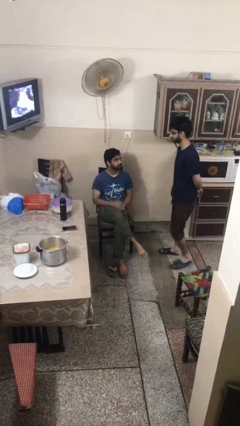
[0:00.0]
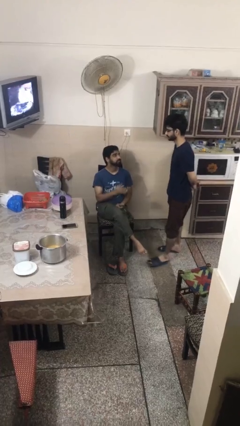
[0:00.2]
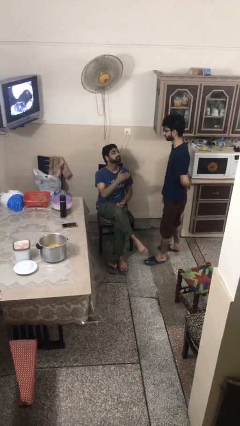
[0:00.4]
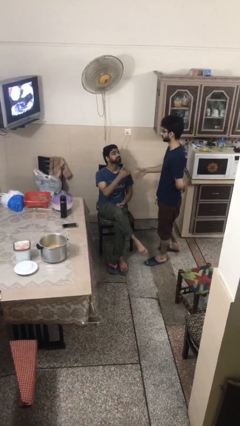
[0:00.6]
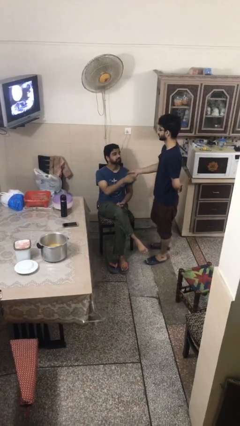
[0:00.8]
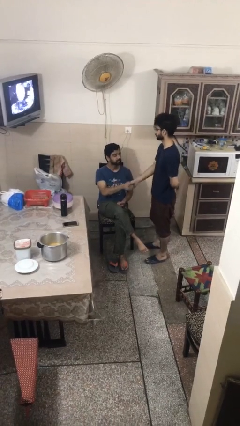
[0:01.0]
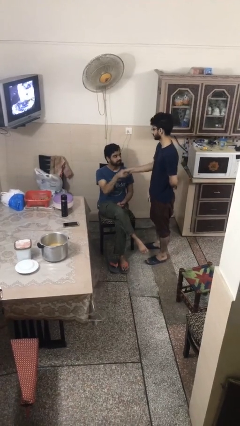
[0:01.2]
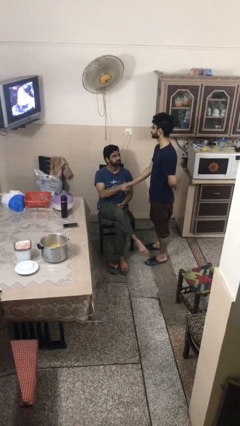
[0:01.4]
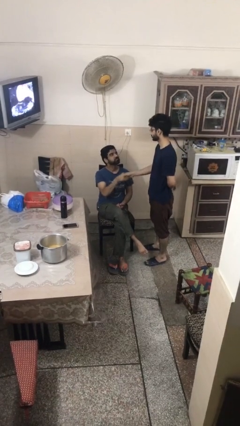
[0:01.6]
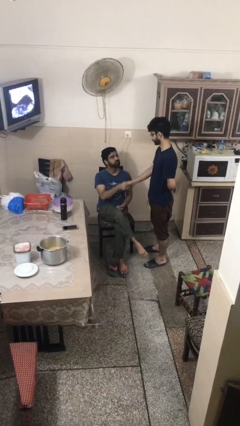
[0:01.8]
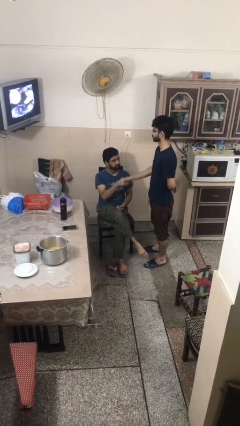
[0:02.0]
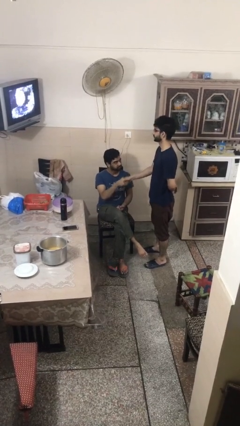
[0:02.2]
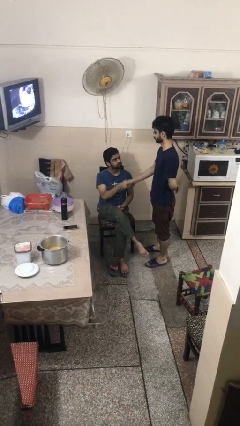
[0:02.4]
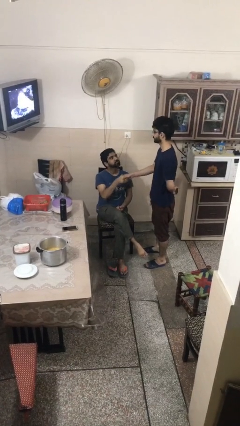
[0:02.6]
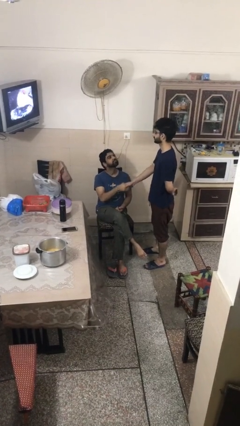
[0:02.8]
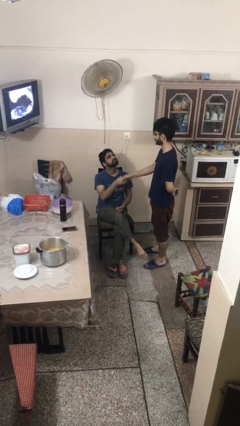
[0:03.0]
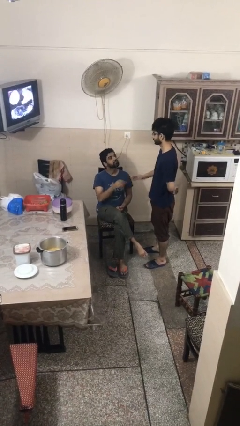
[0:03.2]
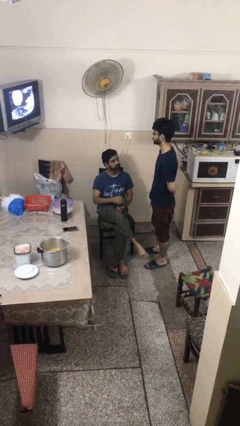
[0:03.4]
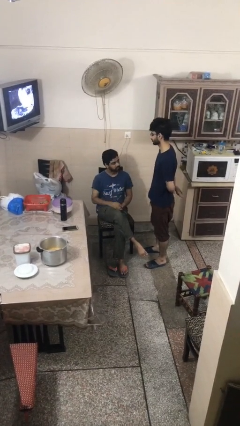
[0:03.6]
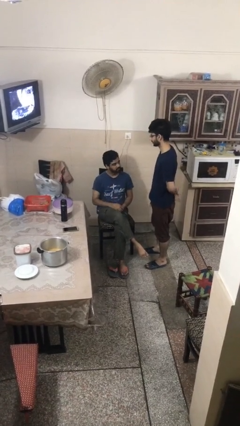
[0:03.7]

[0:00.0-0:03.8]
person shakes hand

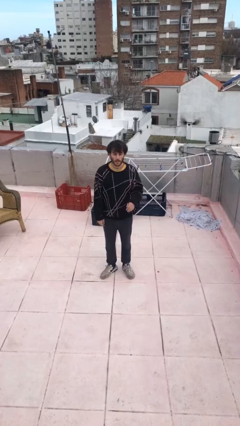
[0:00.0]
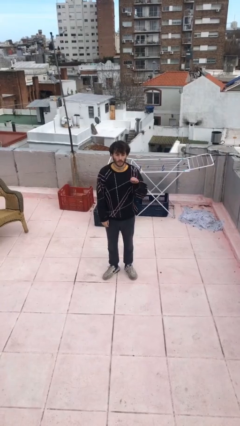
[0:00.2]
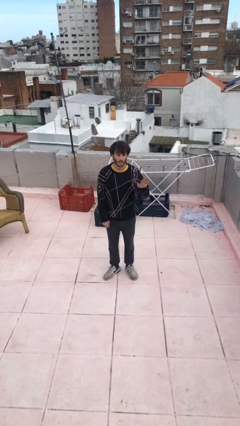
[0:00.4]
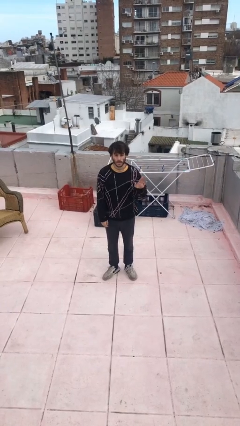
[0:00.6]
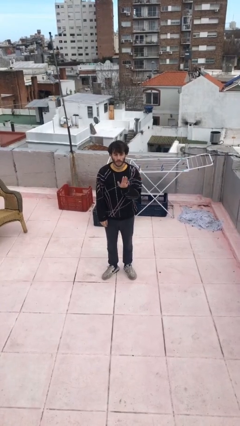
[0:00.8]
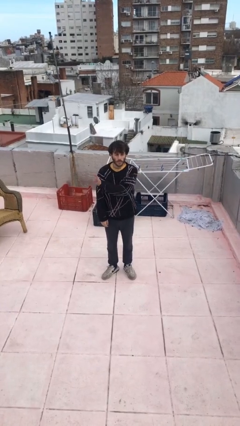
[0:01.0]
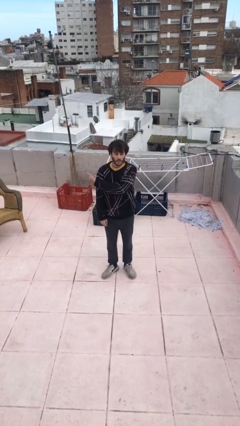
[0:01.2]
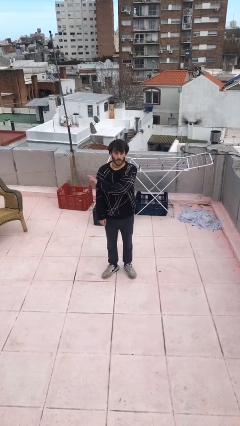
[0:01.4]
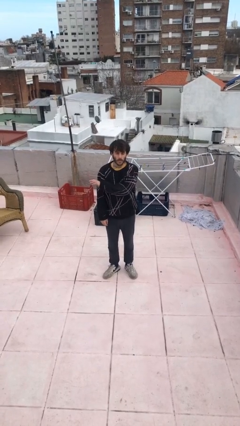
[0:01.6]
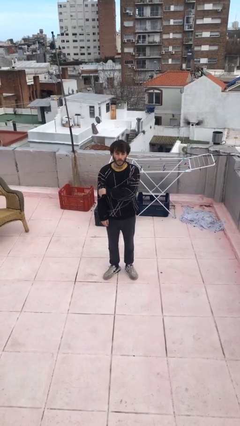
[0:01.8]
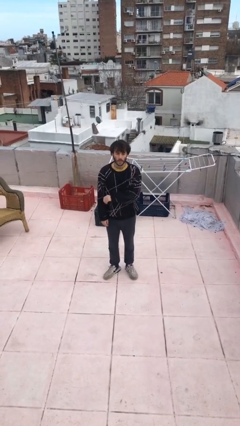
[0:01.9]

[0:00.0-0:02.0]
person gestures swipe right

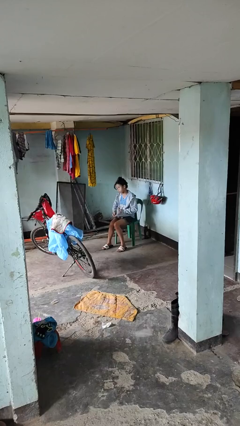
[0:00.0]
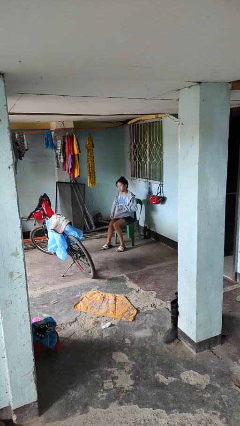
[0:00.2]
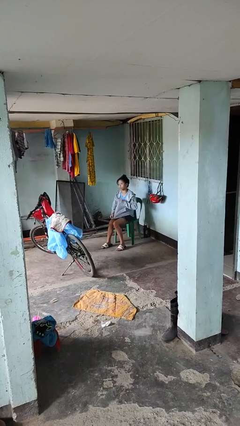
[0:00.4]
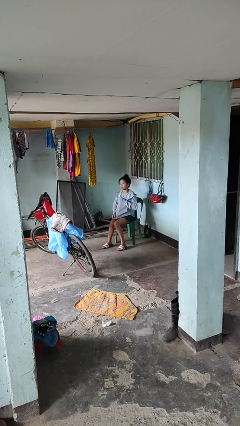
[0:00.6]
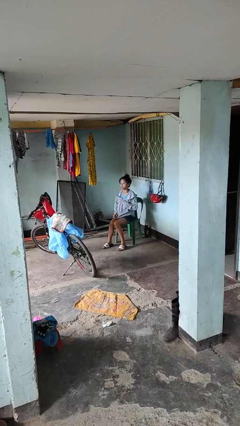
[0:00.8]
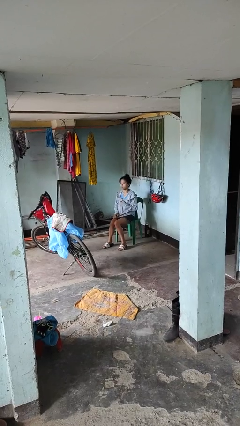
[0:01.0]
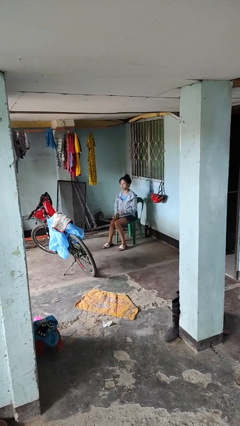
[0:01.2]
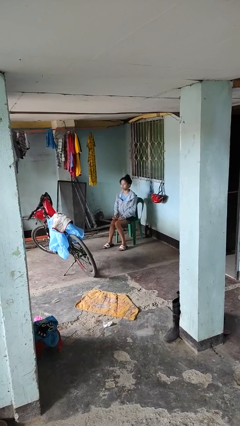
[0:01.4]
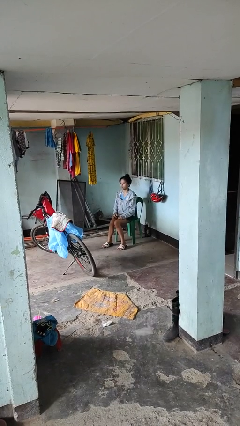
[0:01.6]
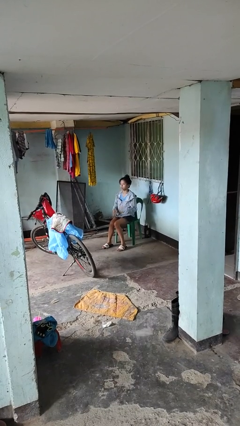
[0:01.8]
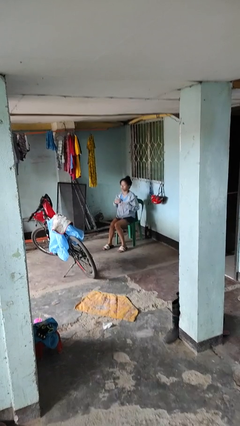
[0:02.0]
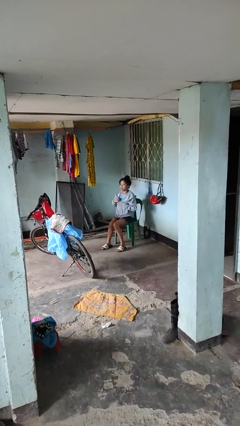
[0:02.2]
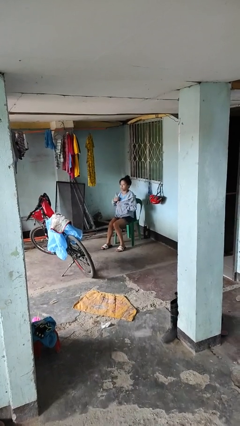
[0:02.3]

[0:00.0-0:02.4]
person zips up jacket

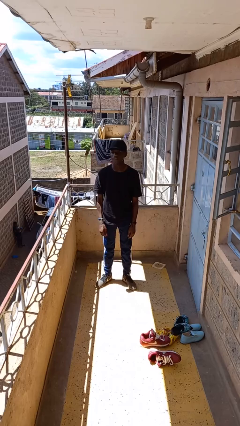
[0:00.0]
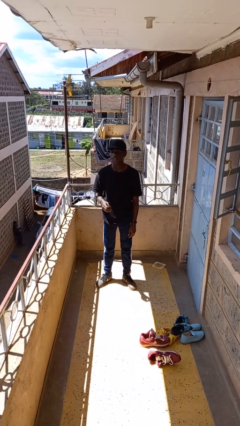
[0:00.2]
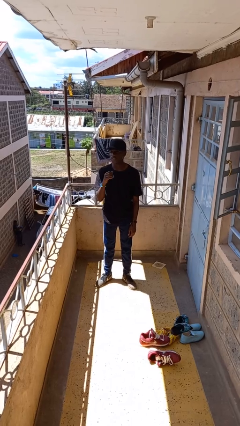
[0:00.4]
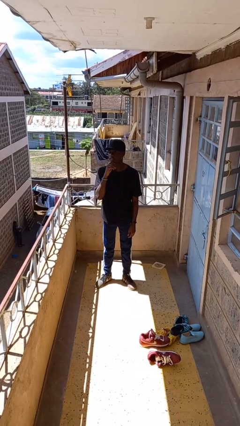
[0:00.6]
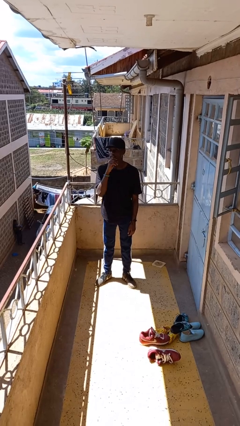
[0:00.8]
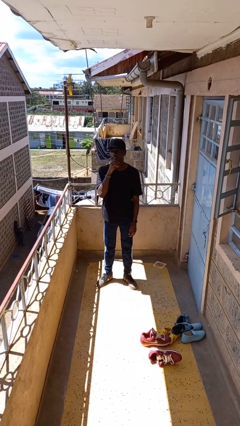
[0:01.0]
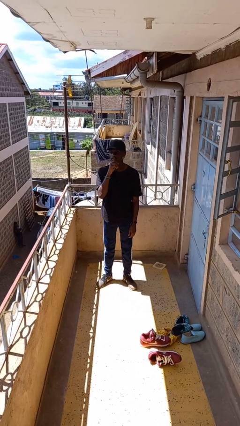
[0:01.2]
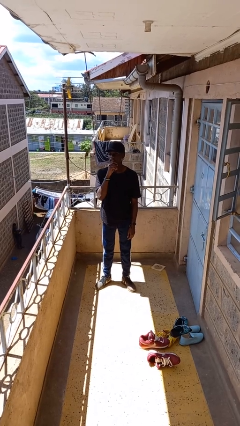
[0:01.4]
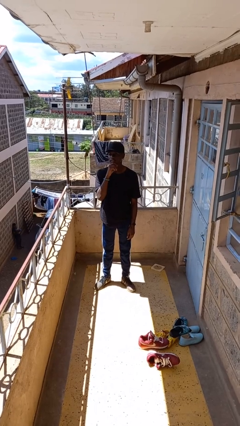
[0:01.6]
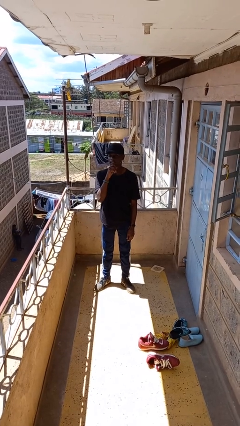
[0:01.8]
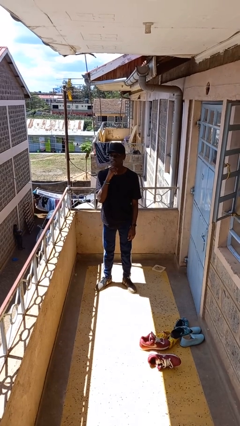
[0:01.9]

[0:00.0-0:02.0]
person strokes chin

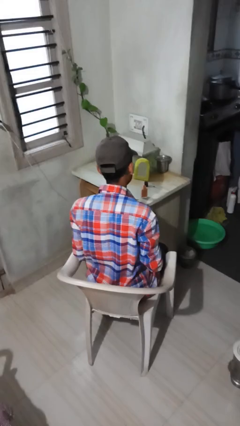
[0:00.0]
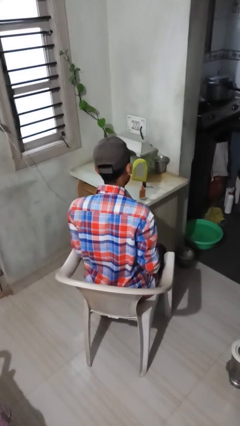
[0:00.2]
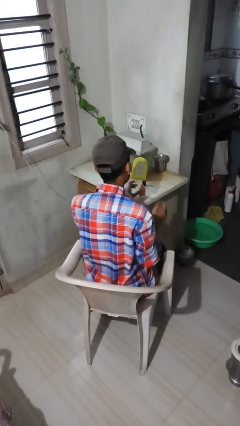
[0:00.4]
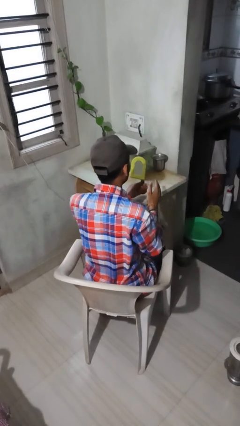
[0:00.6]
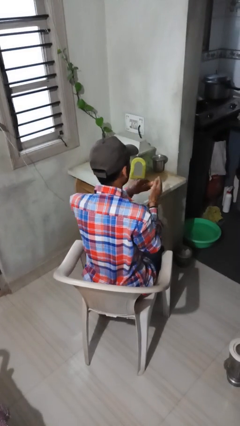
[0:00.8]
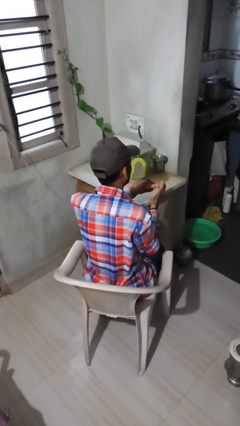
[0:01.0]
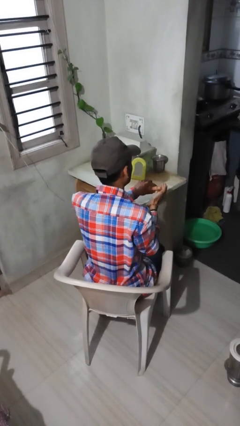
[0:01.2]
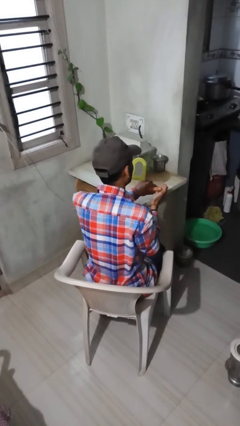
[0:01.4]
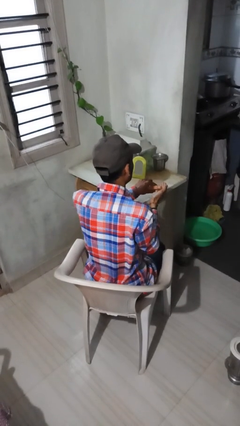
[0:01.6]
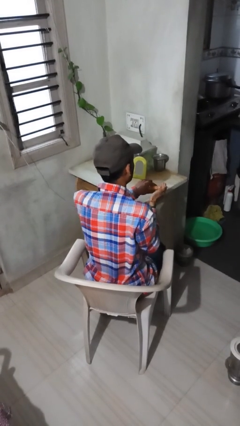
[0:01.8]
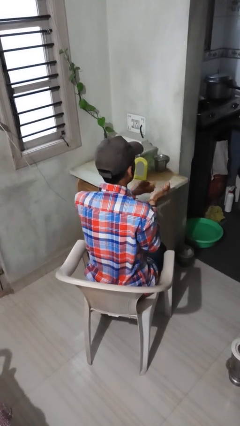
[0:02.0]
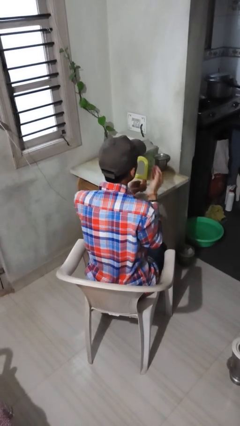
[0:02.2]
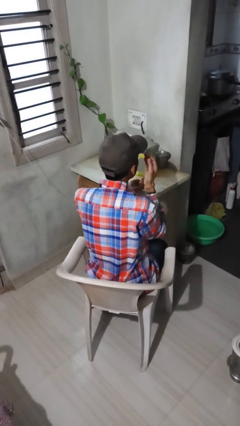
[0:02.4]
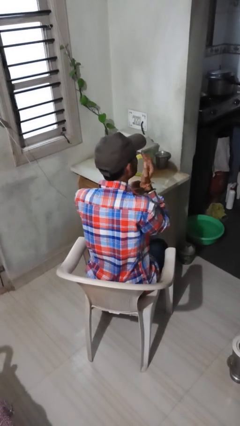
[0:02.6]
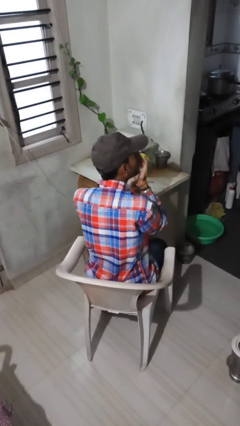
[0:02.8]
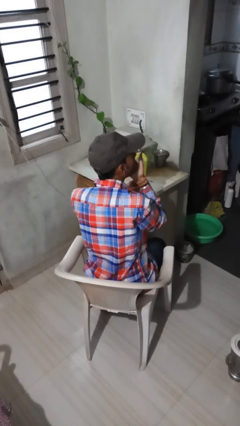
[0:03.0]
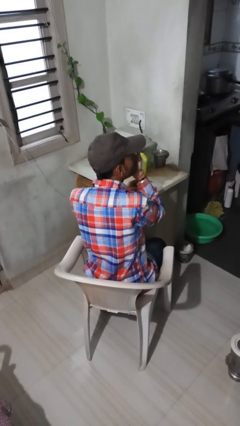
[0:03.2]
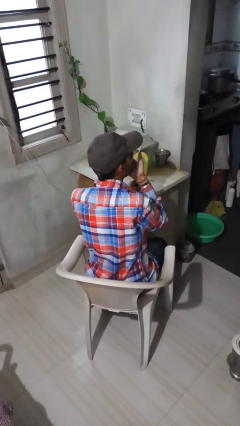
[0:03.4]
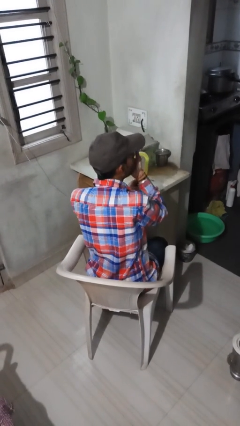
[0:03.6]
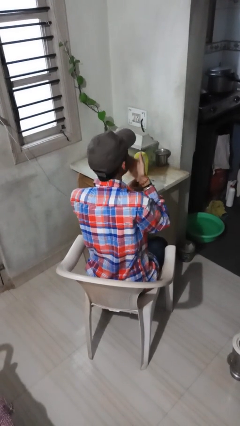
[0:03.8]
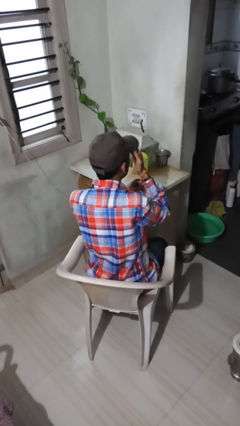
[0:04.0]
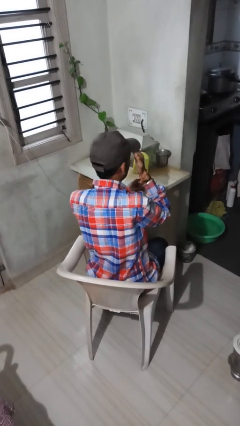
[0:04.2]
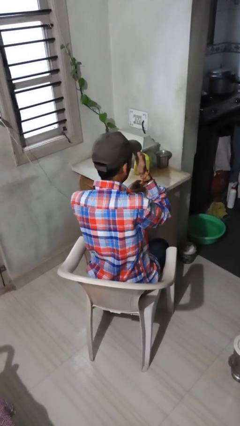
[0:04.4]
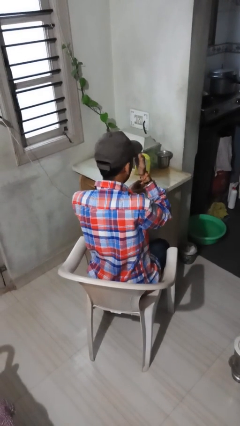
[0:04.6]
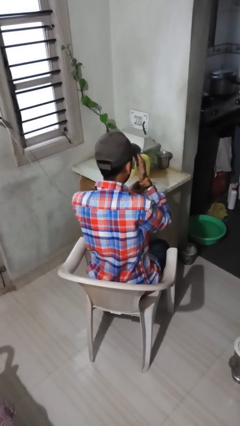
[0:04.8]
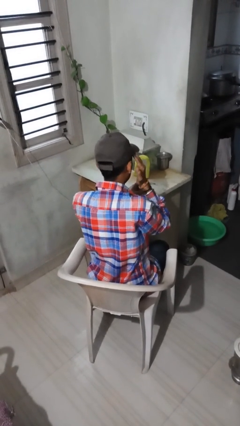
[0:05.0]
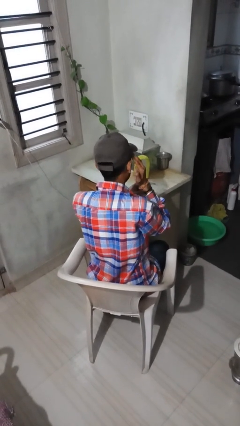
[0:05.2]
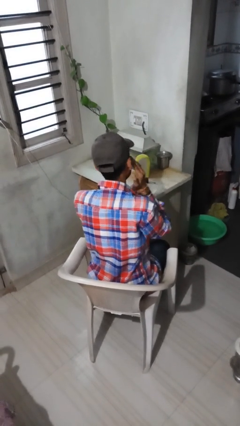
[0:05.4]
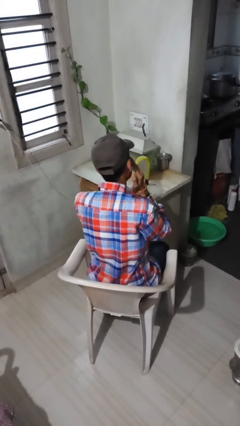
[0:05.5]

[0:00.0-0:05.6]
person applies foundation makeup

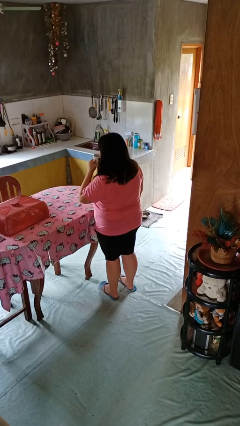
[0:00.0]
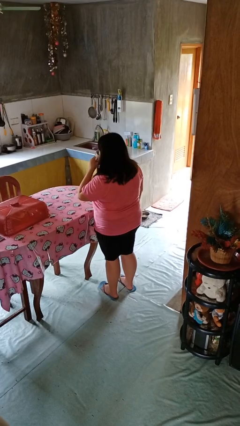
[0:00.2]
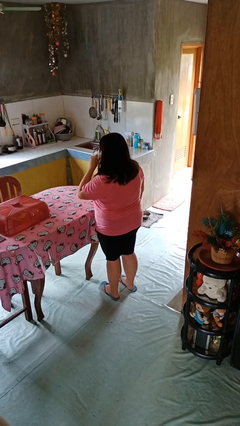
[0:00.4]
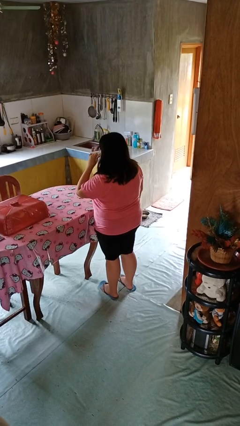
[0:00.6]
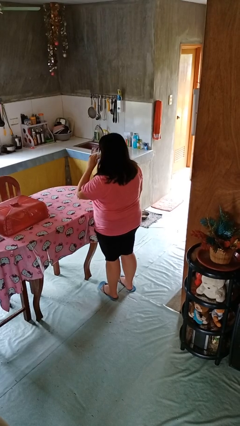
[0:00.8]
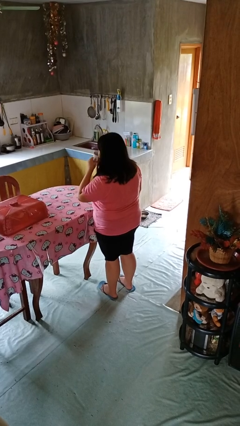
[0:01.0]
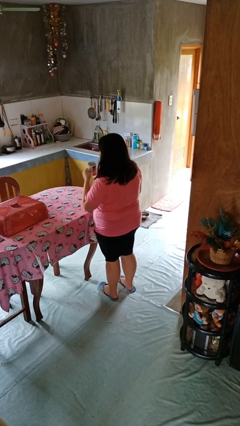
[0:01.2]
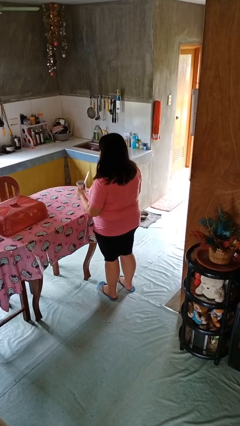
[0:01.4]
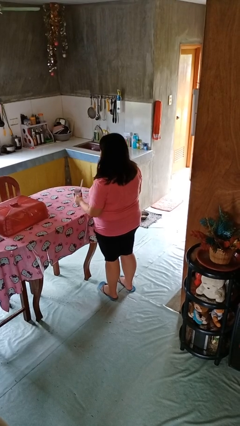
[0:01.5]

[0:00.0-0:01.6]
person drinks from mug
